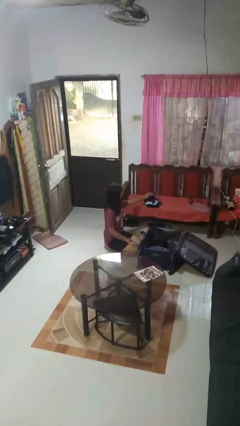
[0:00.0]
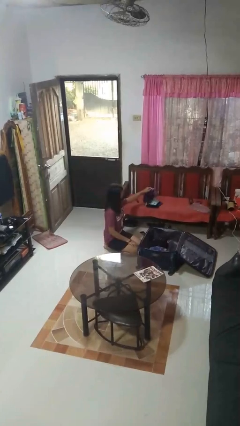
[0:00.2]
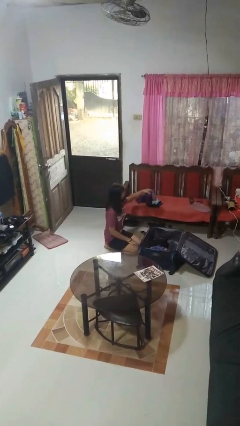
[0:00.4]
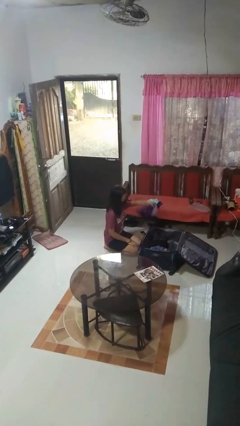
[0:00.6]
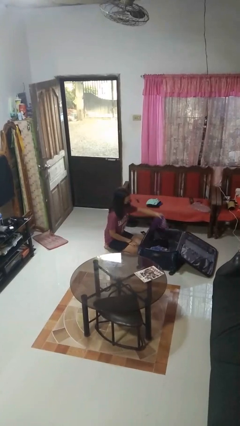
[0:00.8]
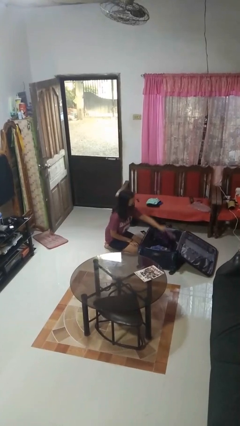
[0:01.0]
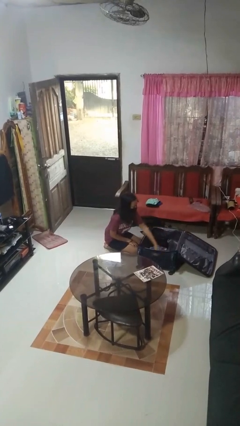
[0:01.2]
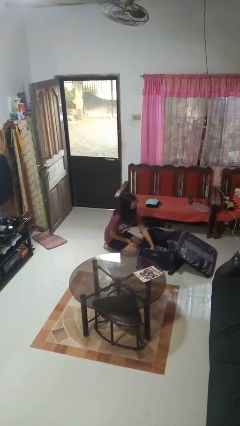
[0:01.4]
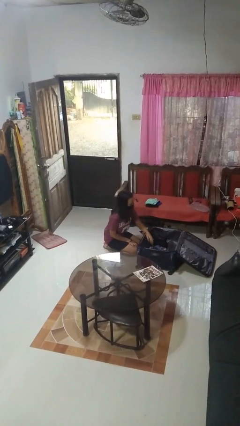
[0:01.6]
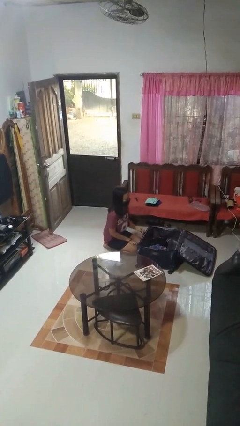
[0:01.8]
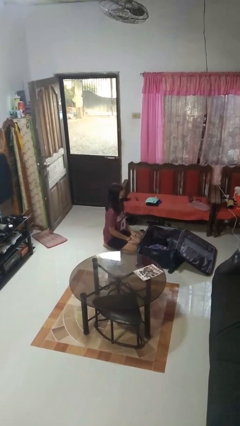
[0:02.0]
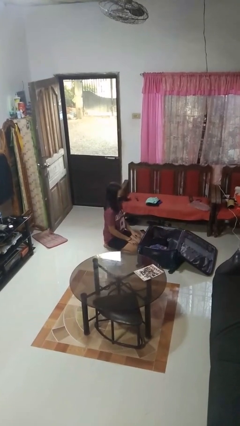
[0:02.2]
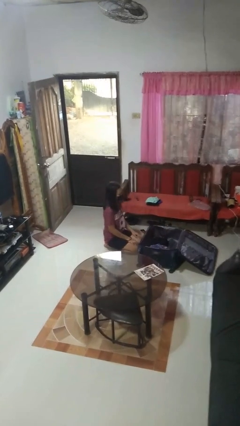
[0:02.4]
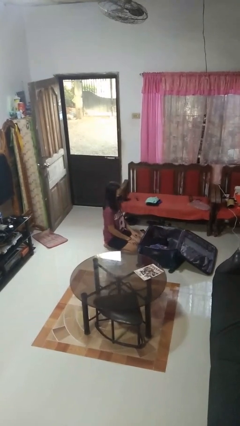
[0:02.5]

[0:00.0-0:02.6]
person loads clothes into suitcase

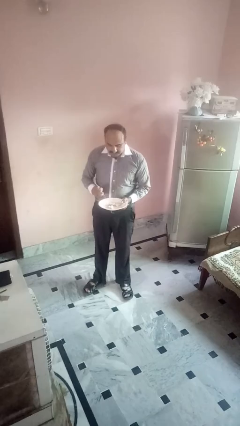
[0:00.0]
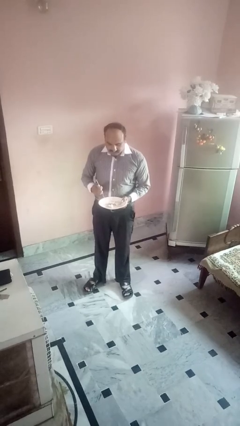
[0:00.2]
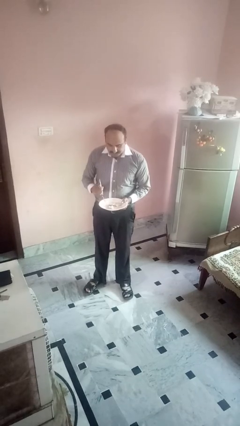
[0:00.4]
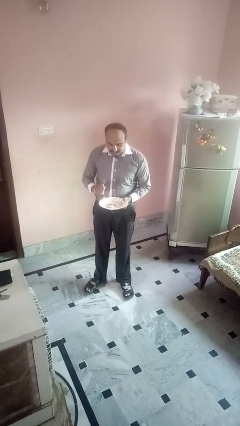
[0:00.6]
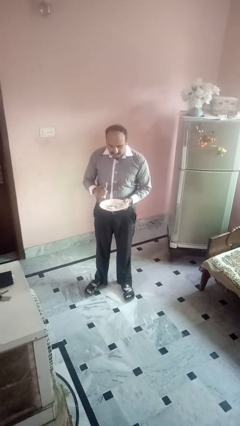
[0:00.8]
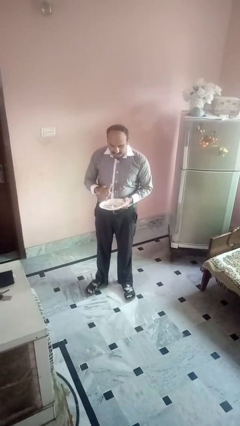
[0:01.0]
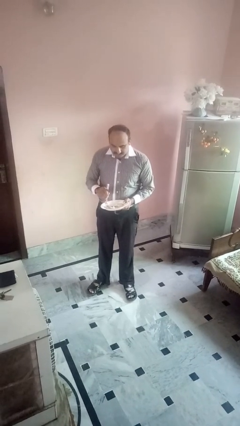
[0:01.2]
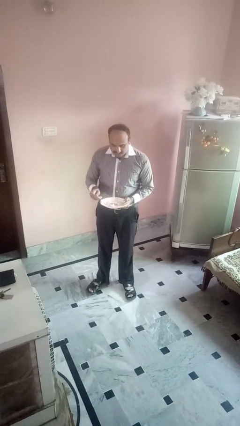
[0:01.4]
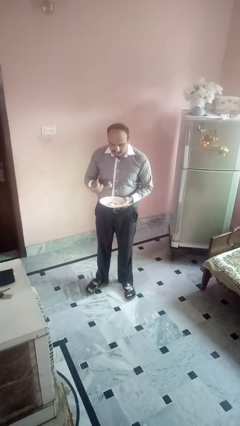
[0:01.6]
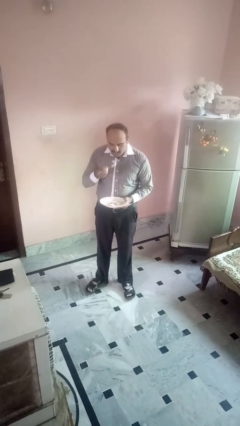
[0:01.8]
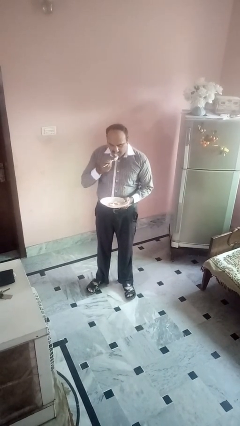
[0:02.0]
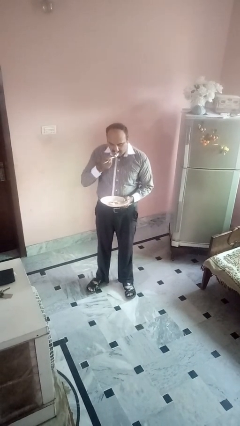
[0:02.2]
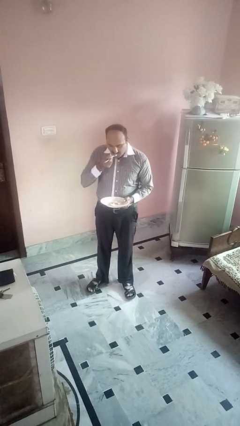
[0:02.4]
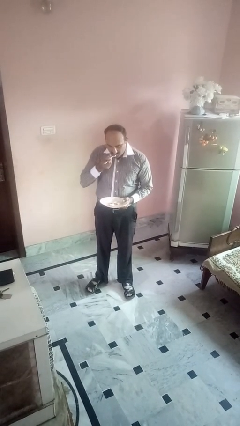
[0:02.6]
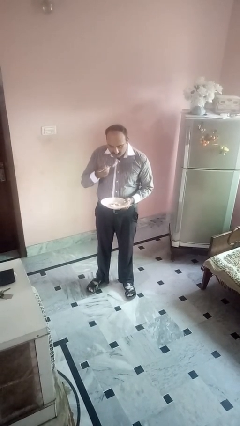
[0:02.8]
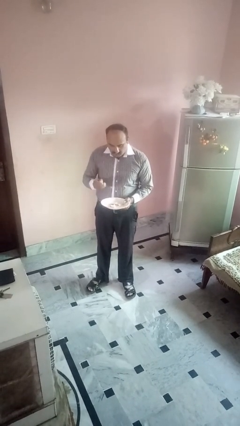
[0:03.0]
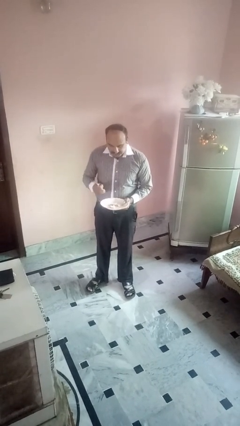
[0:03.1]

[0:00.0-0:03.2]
person eats with utensil

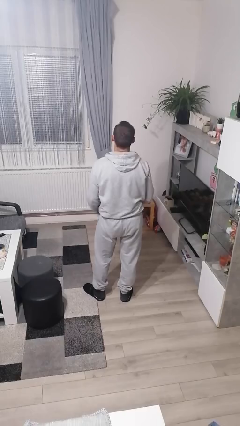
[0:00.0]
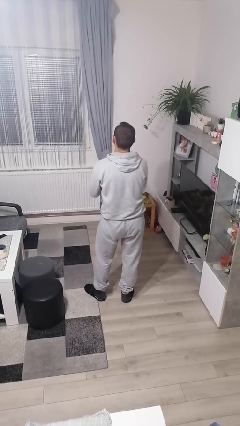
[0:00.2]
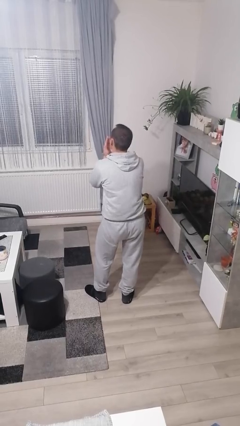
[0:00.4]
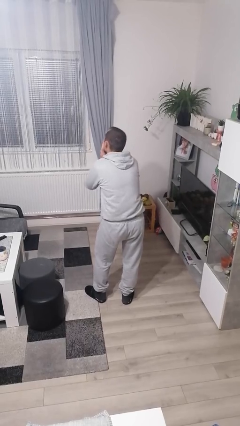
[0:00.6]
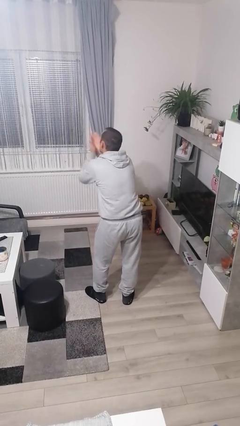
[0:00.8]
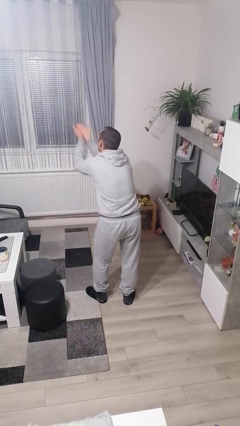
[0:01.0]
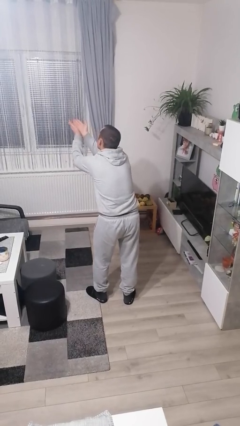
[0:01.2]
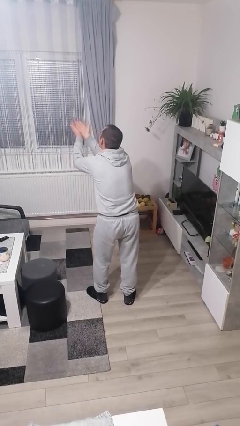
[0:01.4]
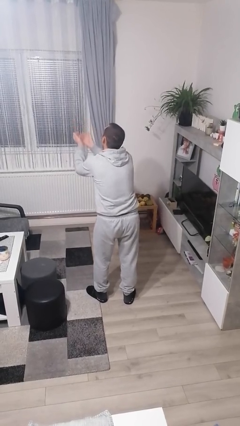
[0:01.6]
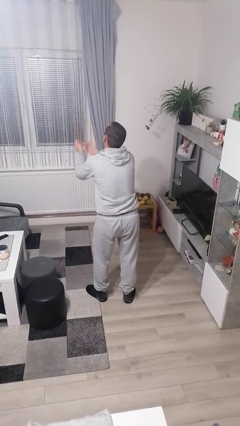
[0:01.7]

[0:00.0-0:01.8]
person gestures blow kiss

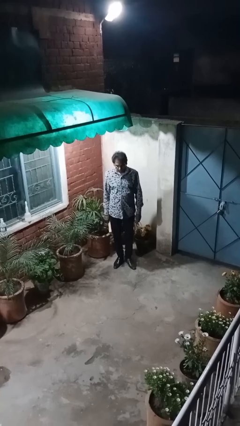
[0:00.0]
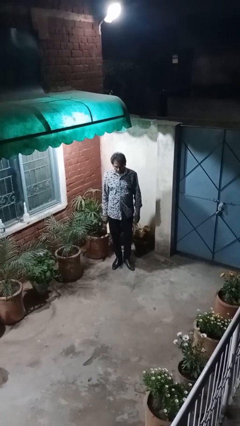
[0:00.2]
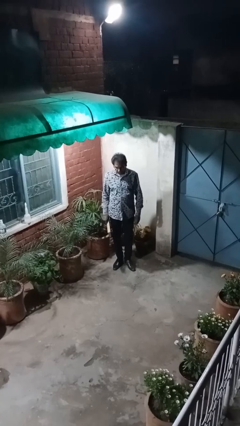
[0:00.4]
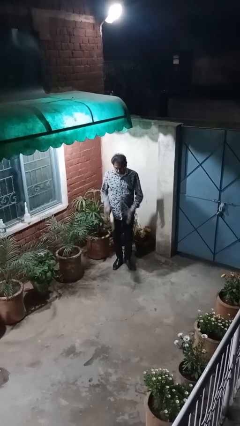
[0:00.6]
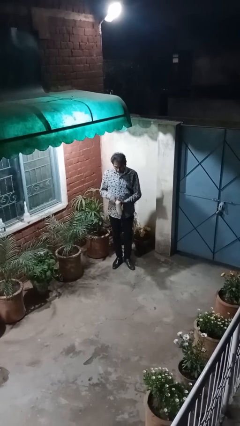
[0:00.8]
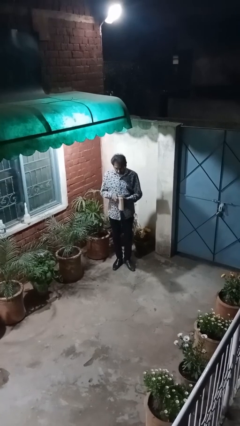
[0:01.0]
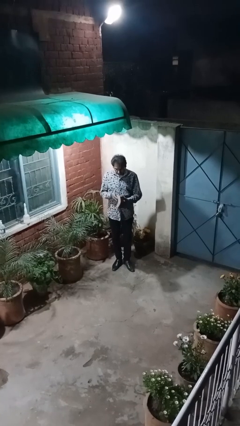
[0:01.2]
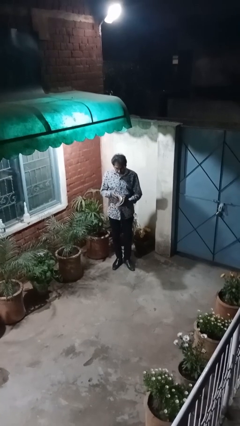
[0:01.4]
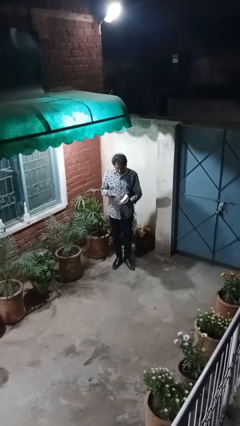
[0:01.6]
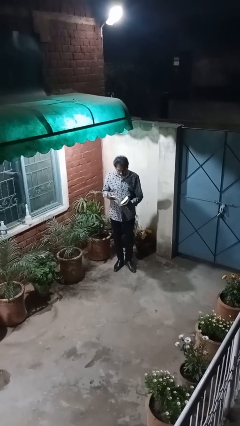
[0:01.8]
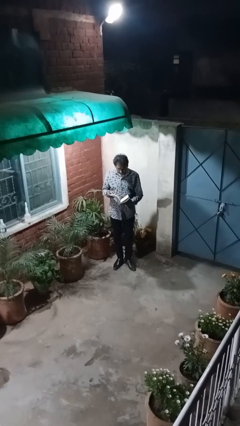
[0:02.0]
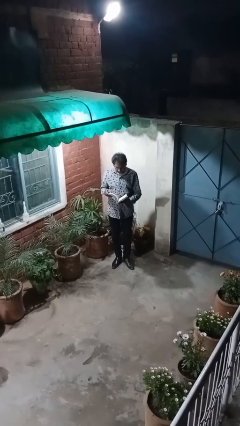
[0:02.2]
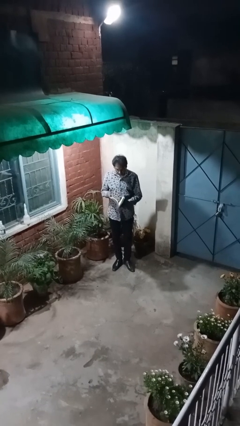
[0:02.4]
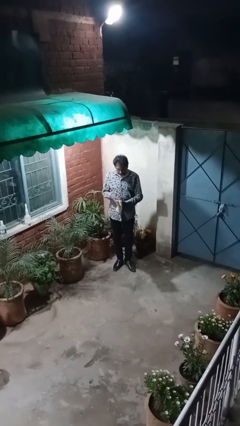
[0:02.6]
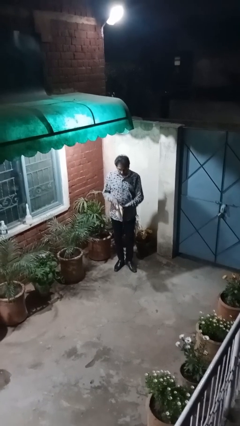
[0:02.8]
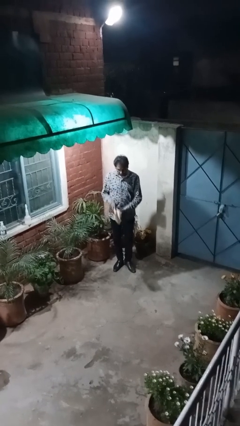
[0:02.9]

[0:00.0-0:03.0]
person reads document

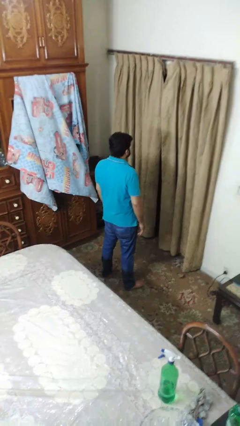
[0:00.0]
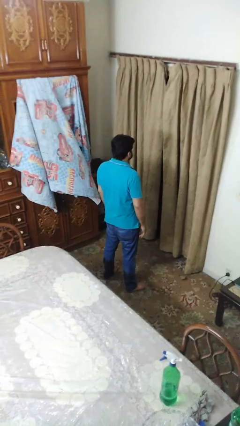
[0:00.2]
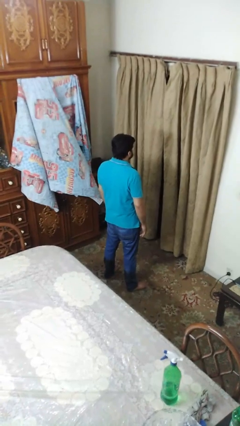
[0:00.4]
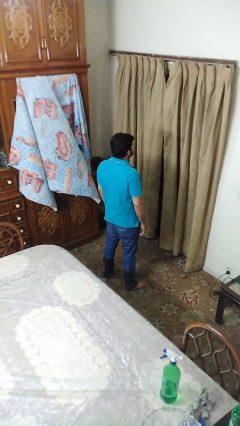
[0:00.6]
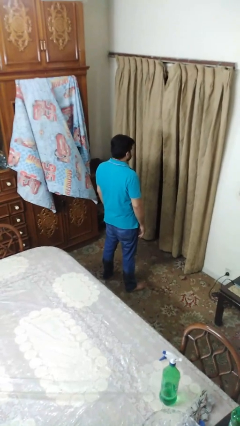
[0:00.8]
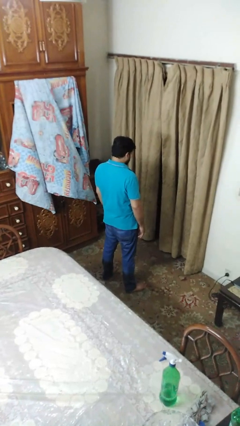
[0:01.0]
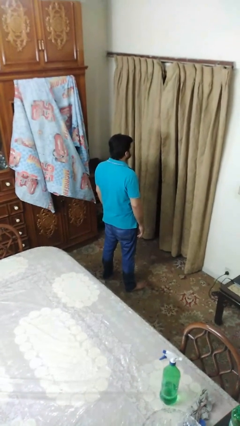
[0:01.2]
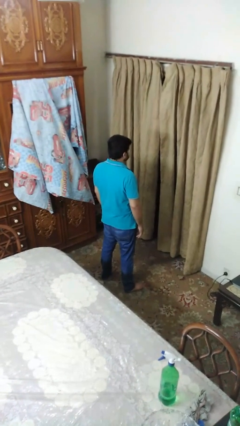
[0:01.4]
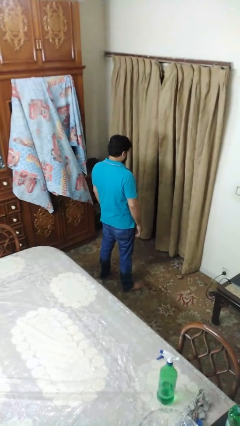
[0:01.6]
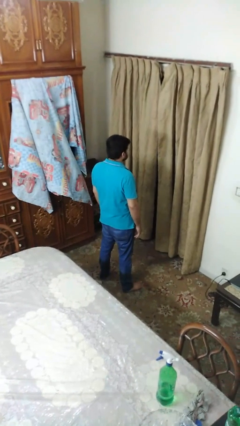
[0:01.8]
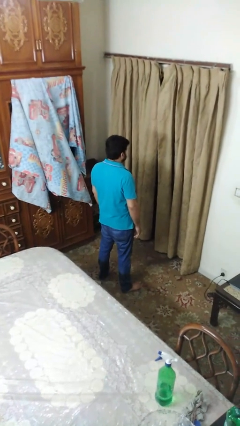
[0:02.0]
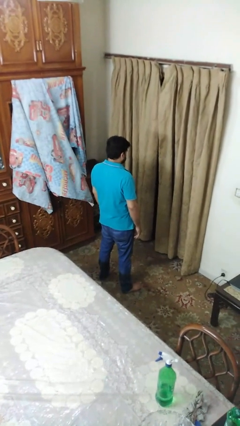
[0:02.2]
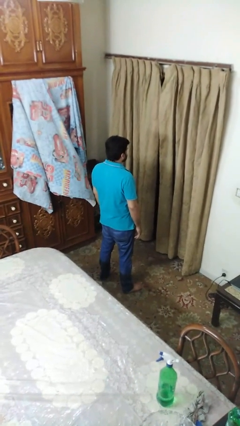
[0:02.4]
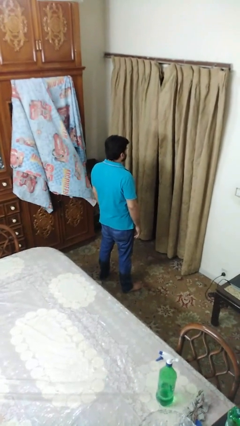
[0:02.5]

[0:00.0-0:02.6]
person nods head

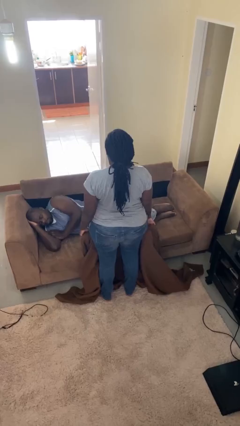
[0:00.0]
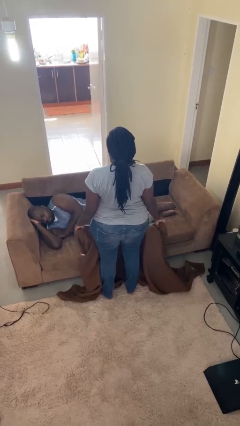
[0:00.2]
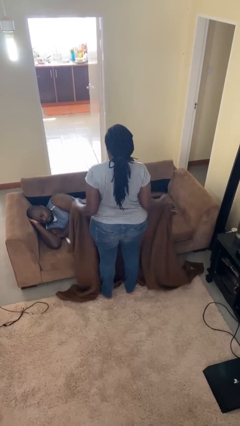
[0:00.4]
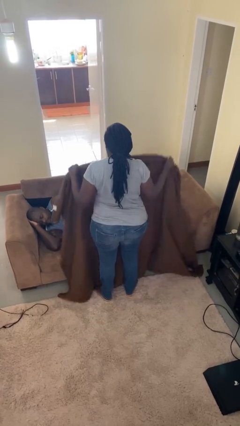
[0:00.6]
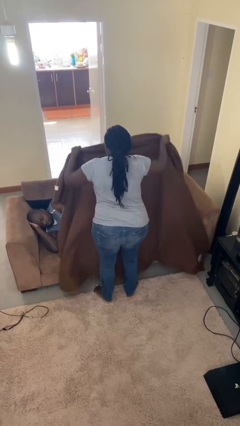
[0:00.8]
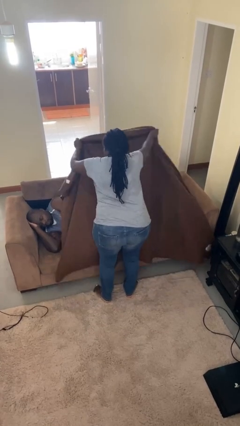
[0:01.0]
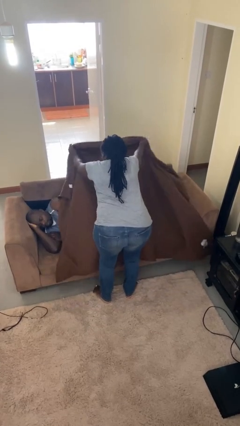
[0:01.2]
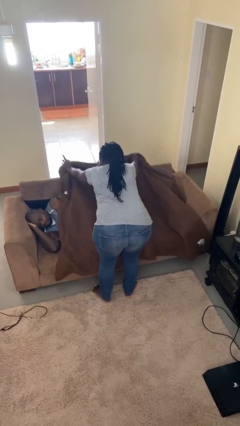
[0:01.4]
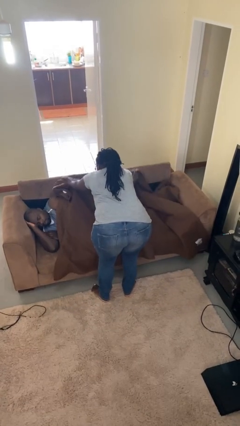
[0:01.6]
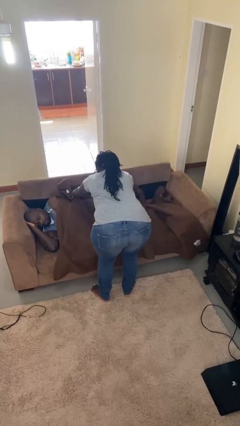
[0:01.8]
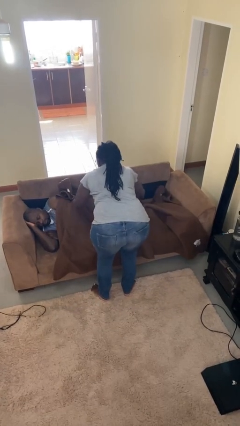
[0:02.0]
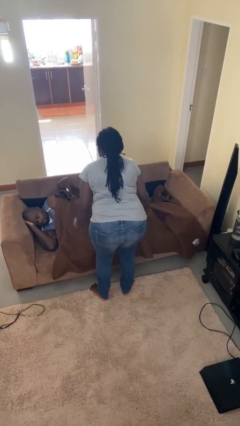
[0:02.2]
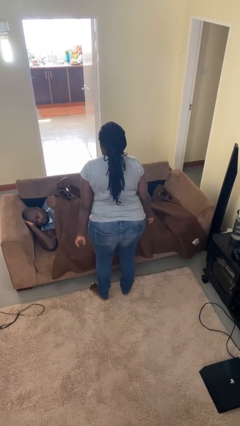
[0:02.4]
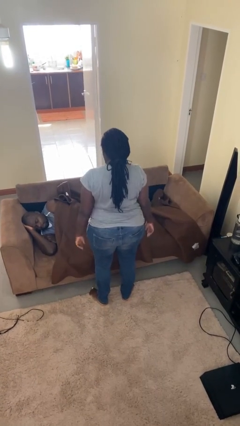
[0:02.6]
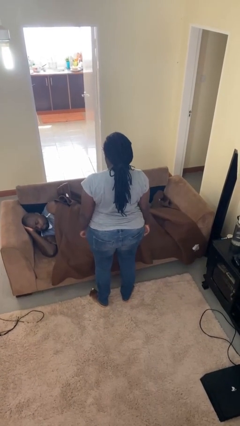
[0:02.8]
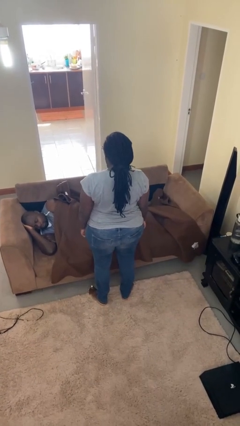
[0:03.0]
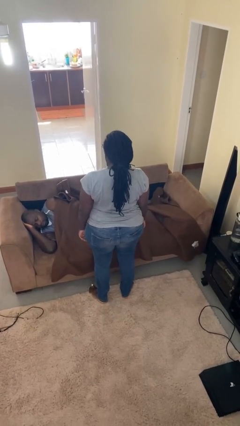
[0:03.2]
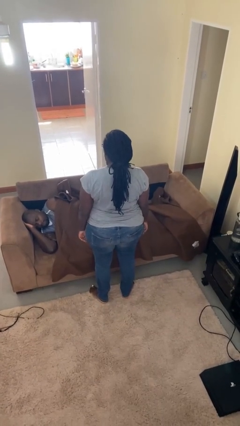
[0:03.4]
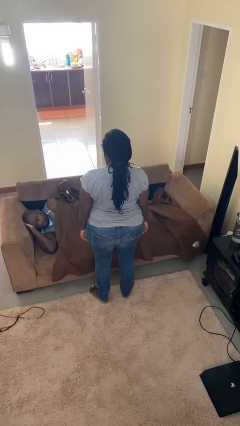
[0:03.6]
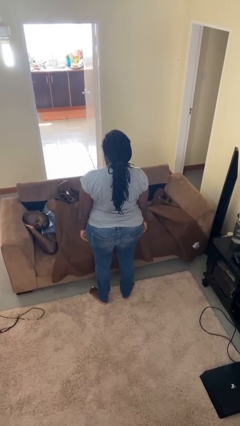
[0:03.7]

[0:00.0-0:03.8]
person covers friend with blanket

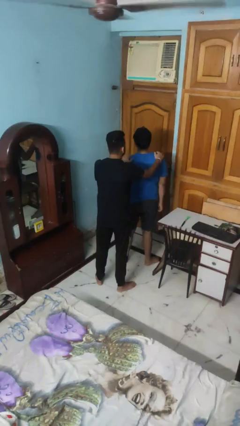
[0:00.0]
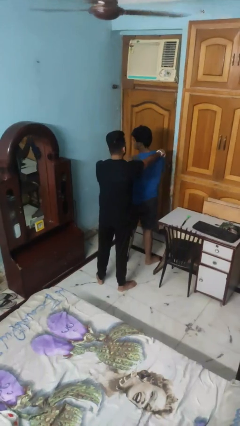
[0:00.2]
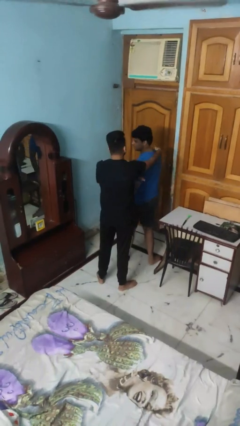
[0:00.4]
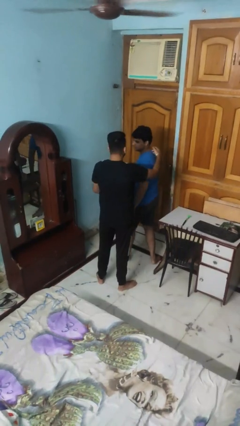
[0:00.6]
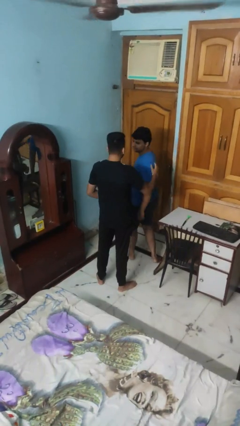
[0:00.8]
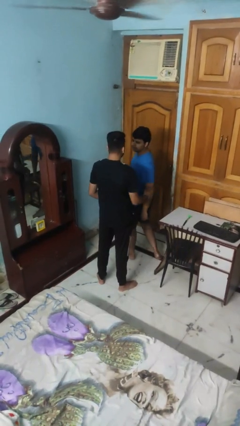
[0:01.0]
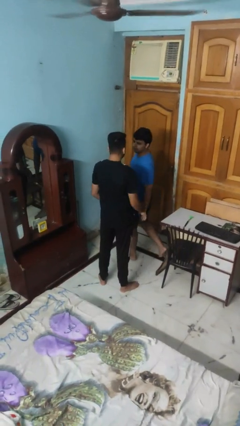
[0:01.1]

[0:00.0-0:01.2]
person spins person around
